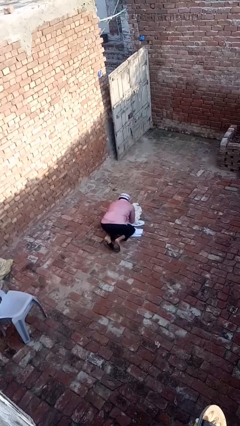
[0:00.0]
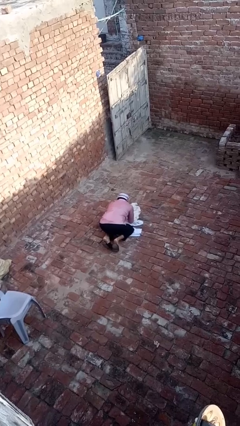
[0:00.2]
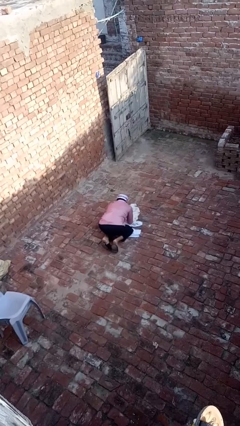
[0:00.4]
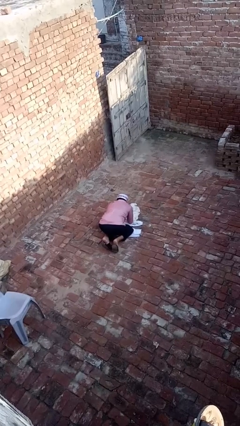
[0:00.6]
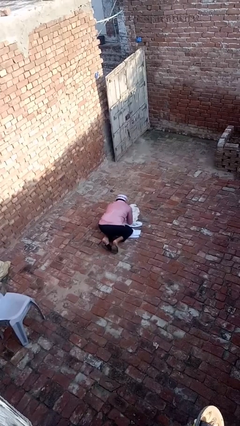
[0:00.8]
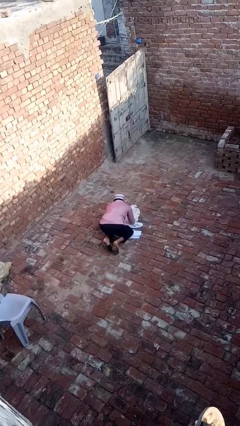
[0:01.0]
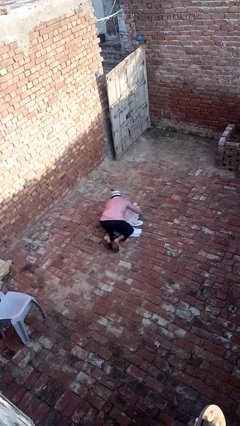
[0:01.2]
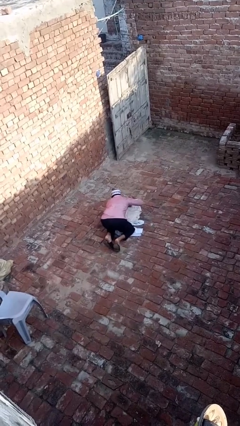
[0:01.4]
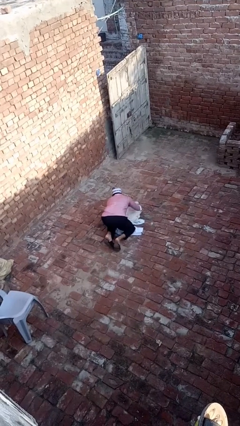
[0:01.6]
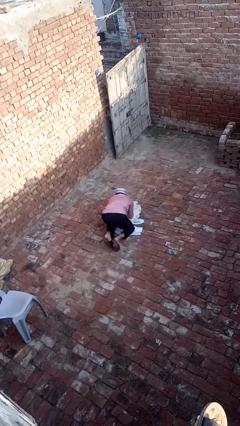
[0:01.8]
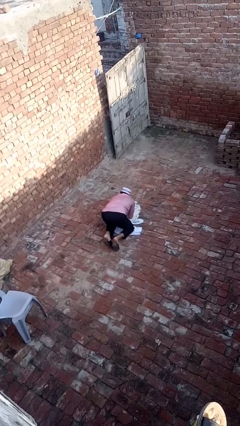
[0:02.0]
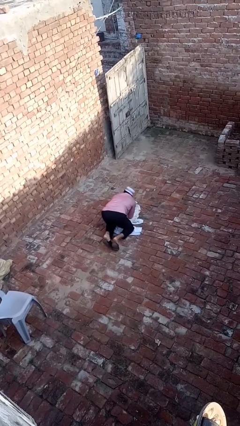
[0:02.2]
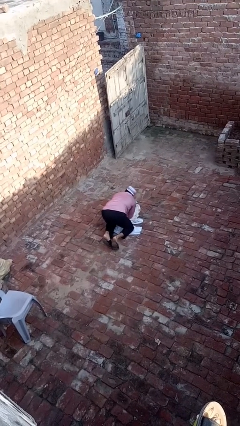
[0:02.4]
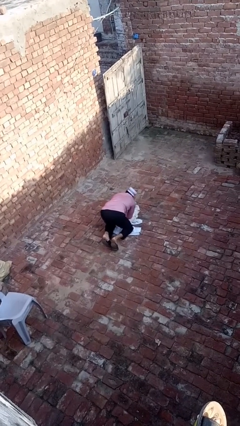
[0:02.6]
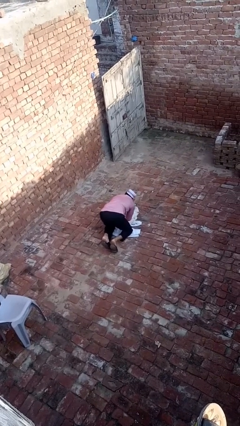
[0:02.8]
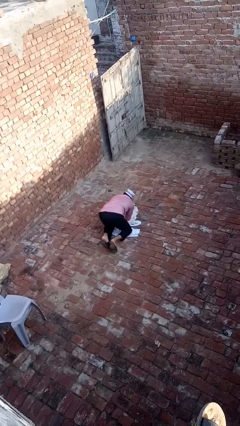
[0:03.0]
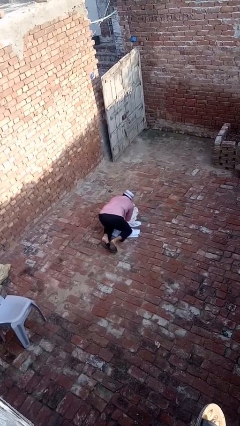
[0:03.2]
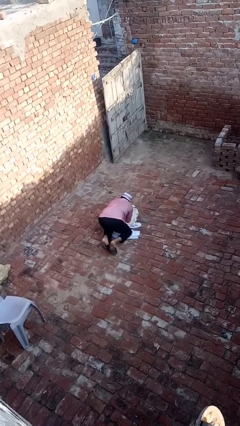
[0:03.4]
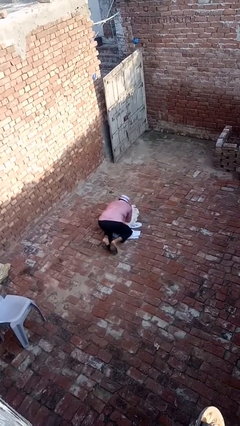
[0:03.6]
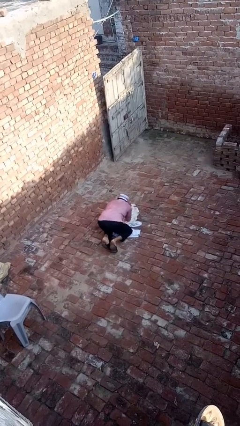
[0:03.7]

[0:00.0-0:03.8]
person crawls

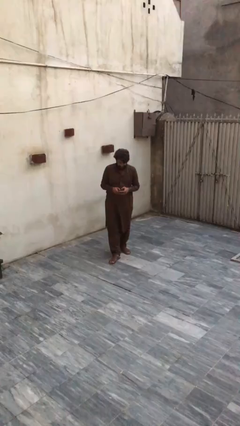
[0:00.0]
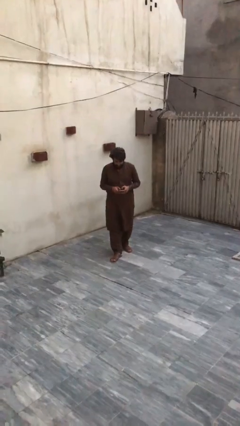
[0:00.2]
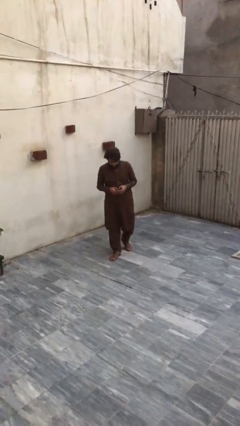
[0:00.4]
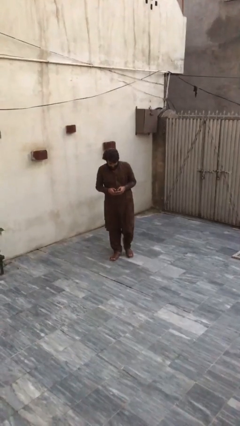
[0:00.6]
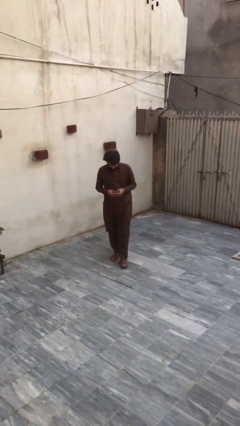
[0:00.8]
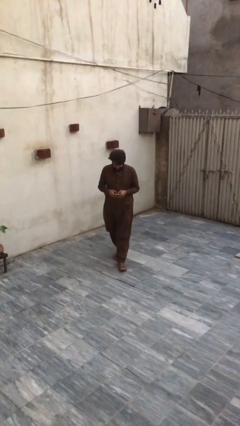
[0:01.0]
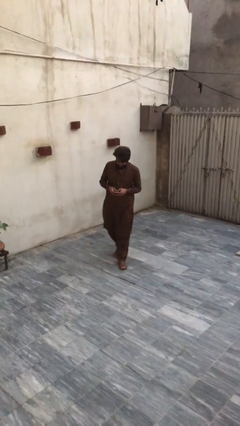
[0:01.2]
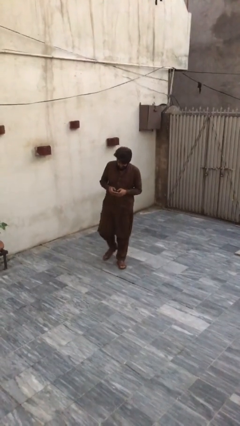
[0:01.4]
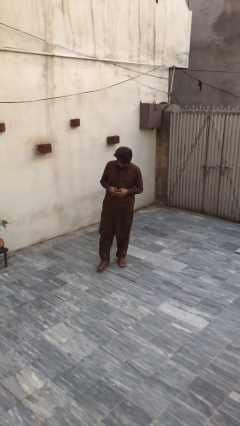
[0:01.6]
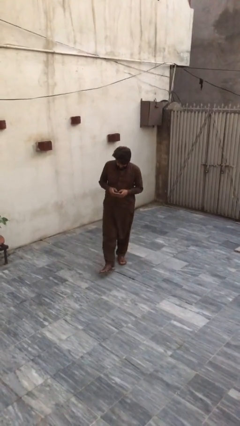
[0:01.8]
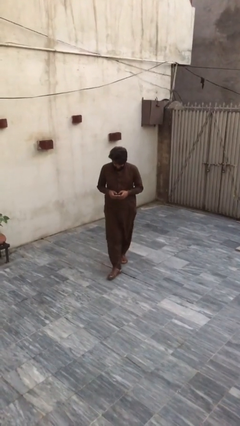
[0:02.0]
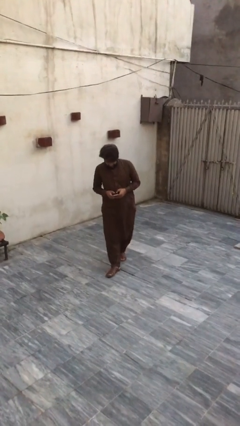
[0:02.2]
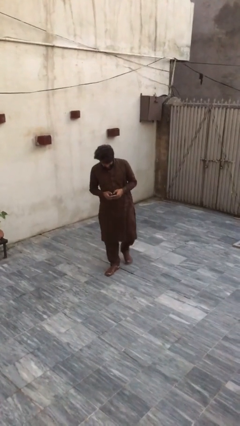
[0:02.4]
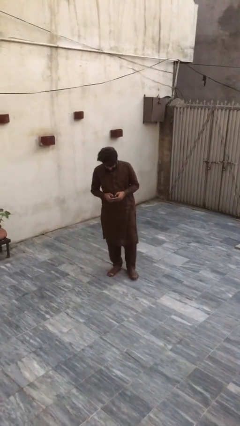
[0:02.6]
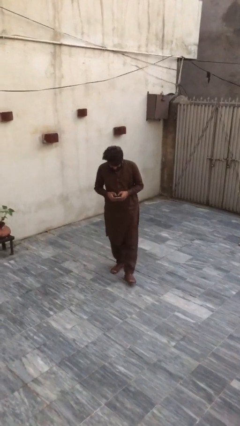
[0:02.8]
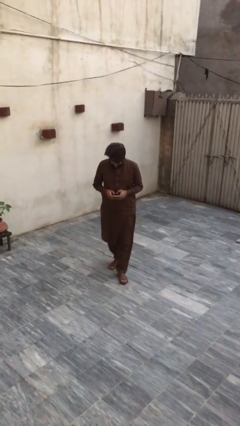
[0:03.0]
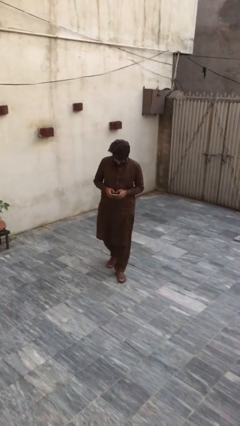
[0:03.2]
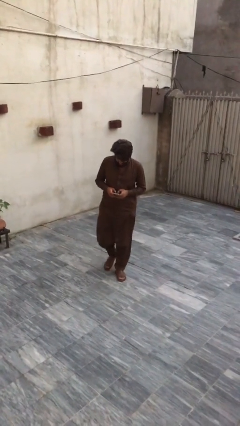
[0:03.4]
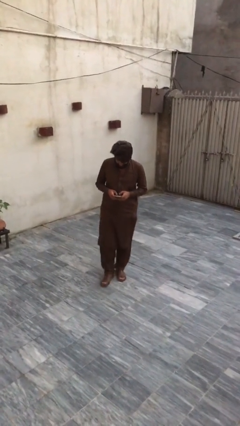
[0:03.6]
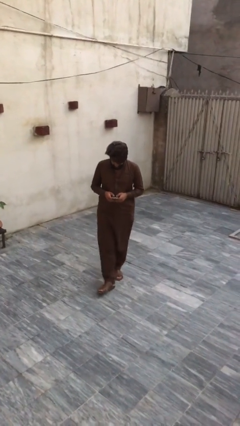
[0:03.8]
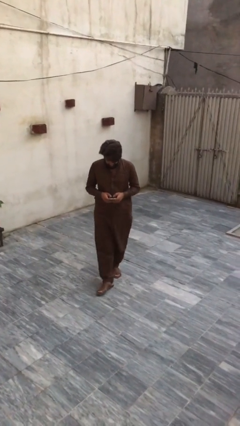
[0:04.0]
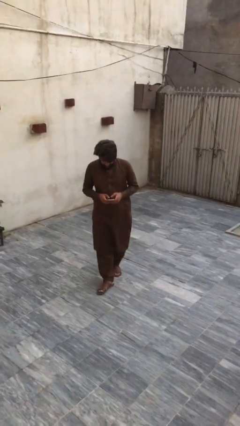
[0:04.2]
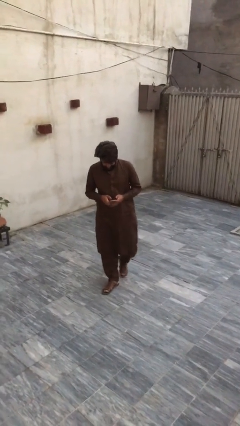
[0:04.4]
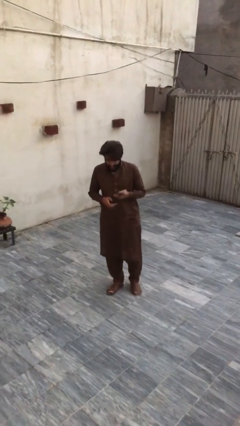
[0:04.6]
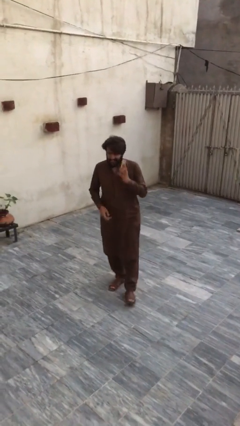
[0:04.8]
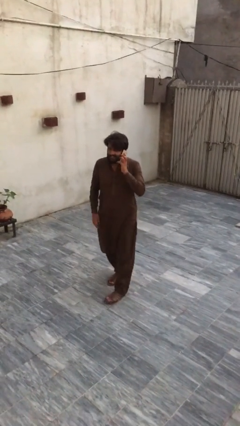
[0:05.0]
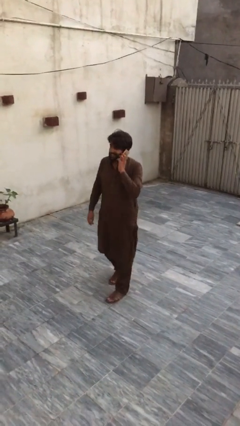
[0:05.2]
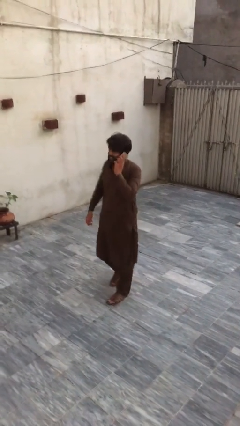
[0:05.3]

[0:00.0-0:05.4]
person texts on phone

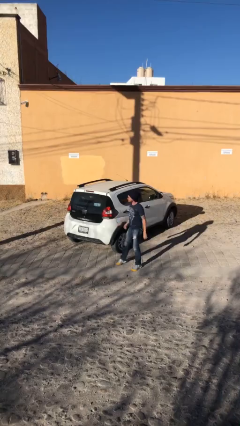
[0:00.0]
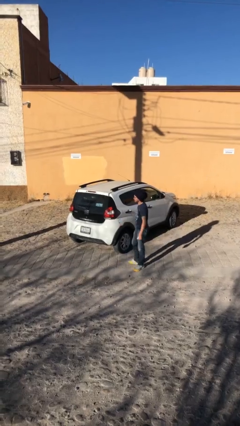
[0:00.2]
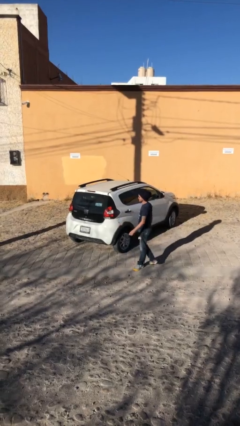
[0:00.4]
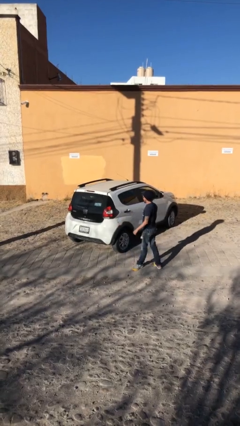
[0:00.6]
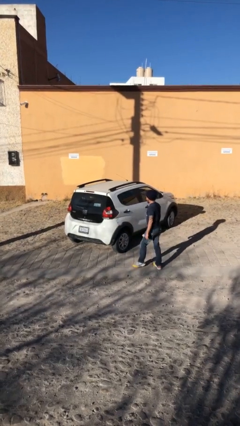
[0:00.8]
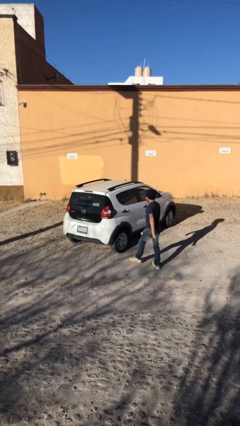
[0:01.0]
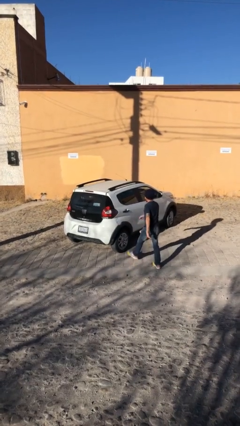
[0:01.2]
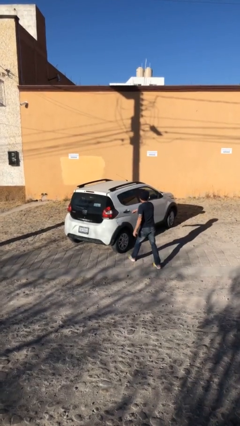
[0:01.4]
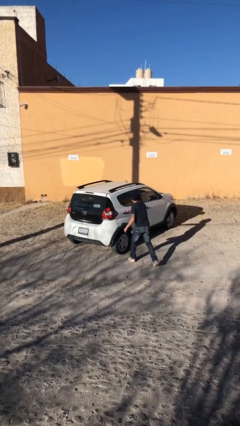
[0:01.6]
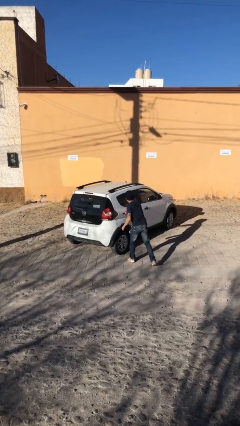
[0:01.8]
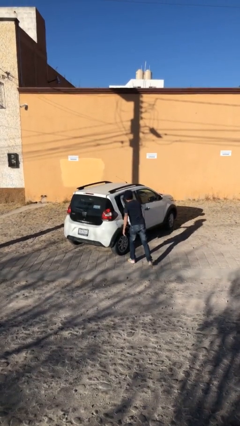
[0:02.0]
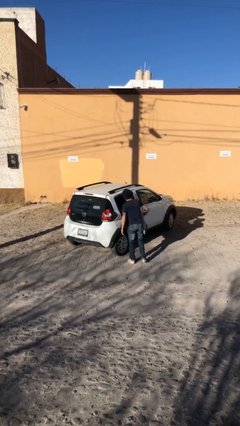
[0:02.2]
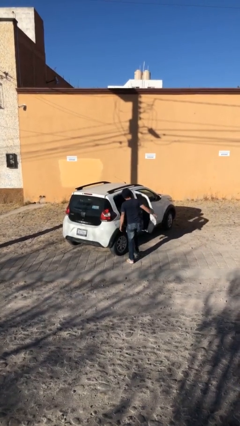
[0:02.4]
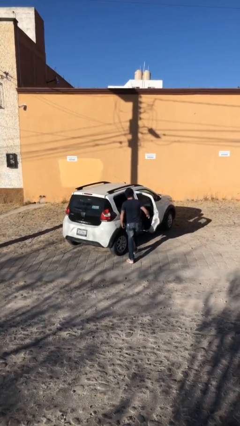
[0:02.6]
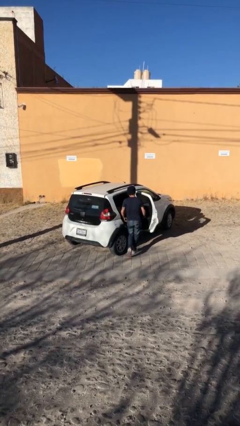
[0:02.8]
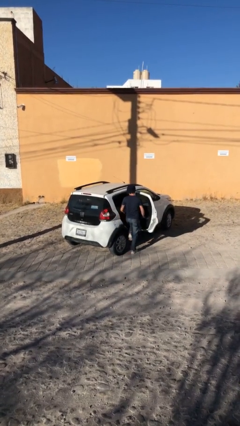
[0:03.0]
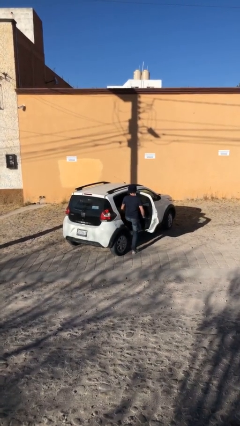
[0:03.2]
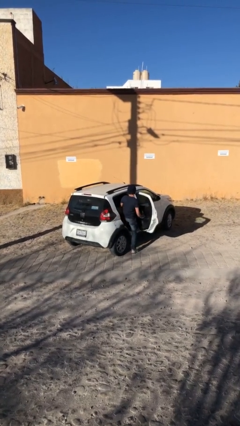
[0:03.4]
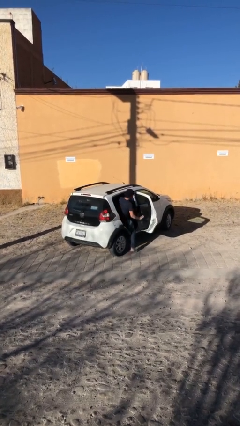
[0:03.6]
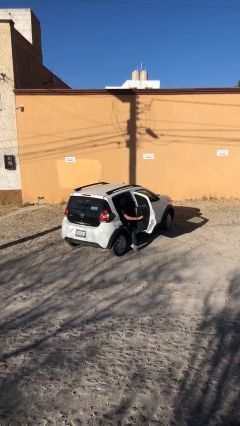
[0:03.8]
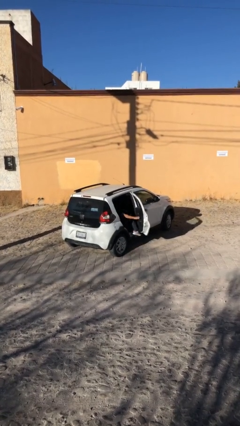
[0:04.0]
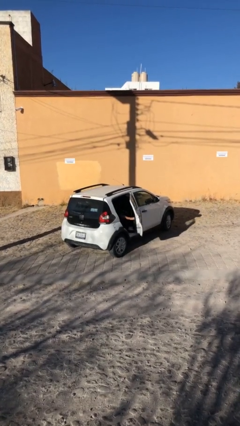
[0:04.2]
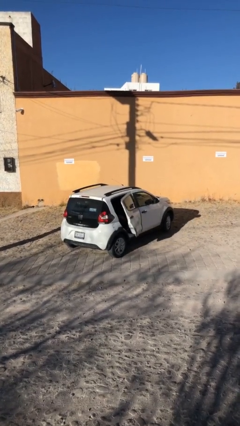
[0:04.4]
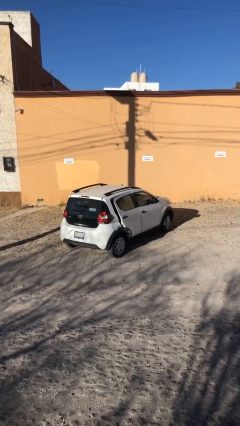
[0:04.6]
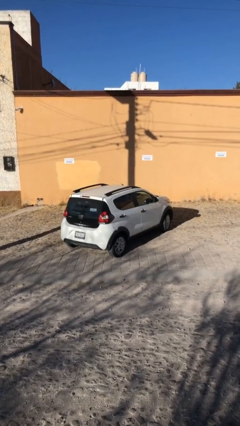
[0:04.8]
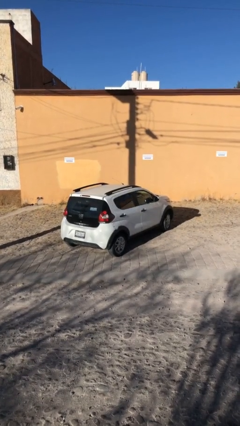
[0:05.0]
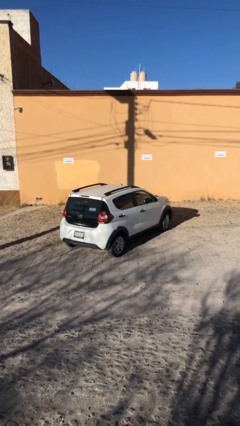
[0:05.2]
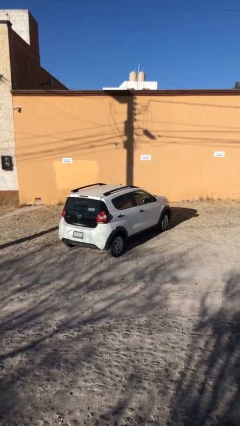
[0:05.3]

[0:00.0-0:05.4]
car picks up person

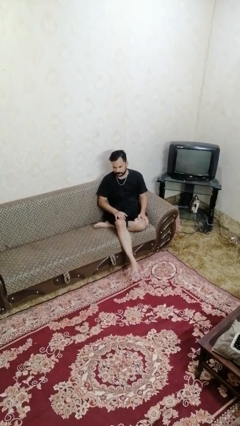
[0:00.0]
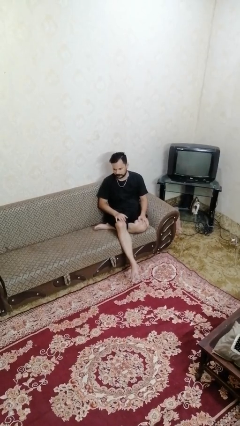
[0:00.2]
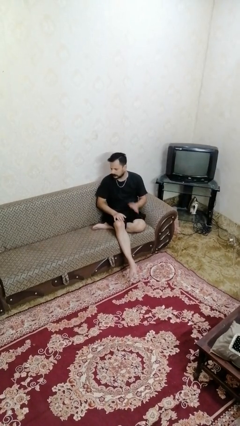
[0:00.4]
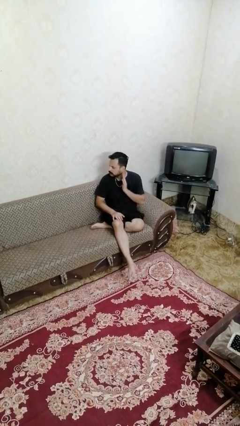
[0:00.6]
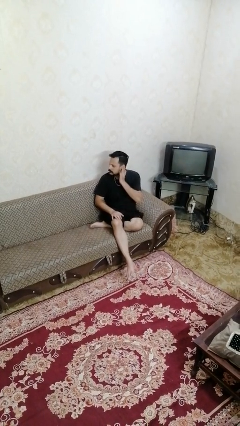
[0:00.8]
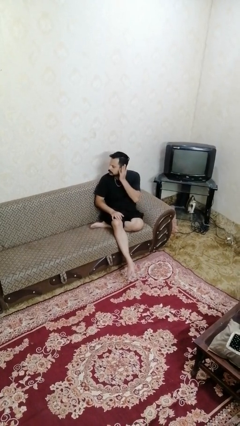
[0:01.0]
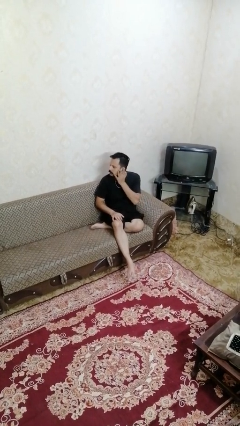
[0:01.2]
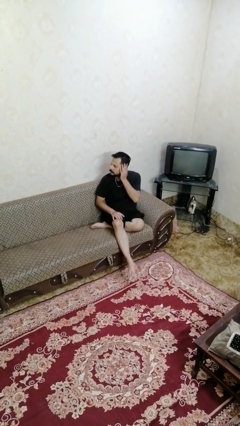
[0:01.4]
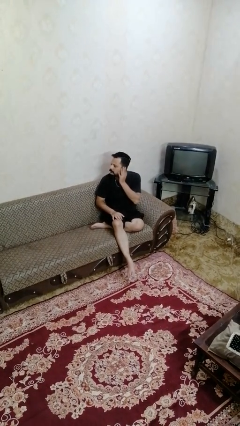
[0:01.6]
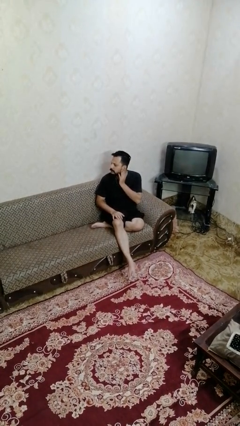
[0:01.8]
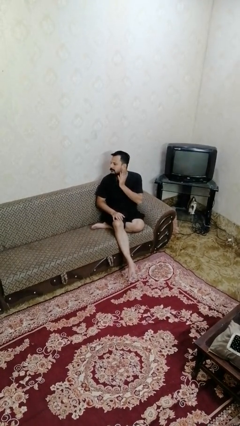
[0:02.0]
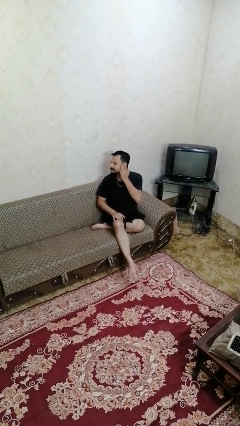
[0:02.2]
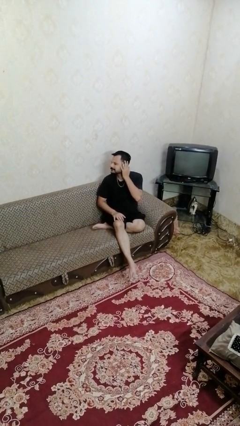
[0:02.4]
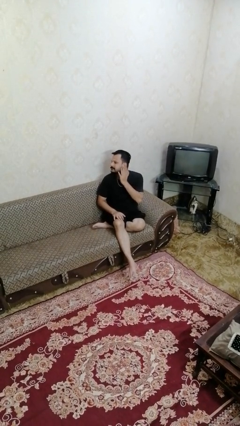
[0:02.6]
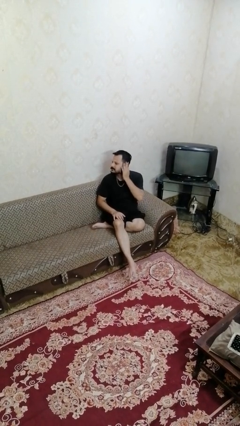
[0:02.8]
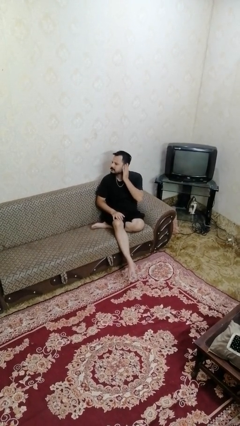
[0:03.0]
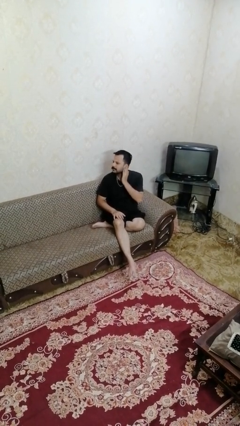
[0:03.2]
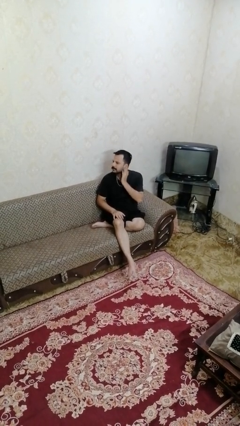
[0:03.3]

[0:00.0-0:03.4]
person touches earlobe
